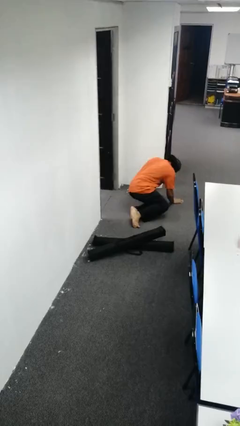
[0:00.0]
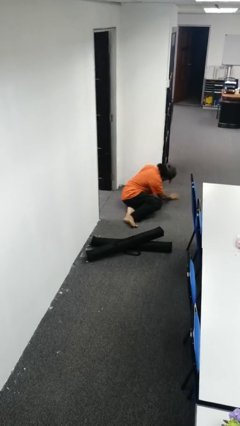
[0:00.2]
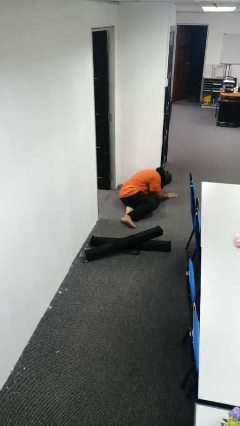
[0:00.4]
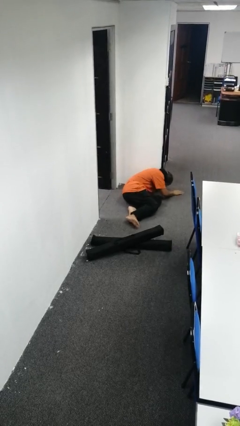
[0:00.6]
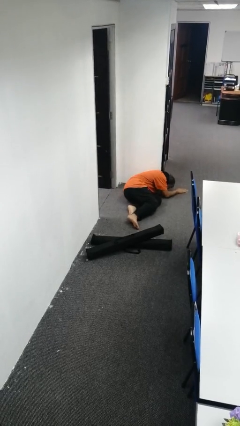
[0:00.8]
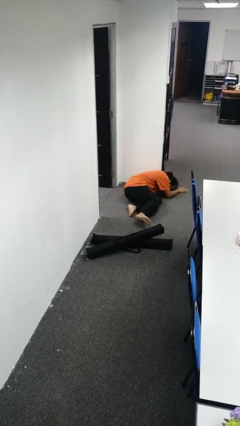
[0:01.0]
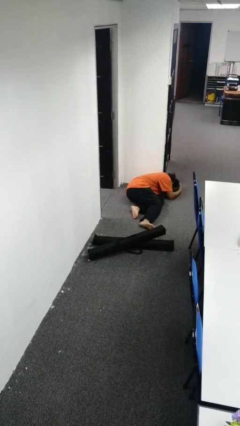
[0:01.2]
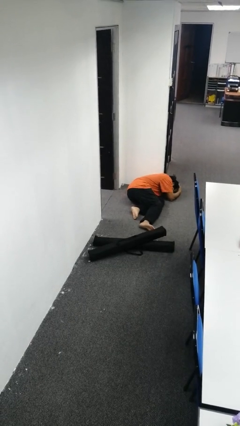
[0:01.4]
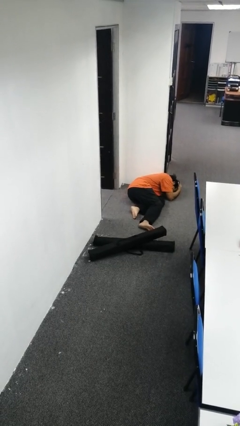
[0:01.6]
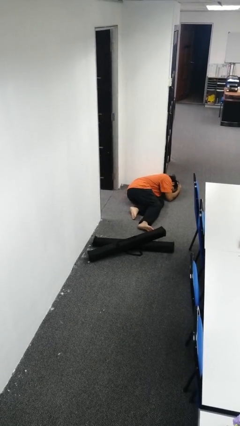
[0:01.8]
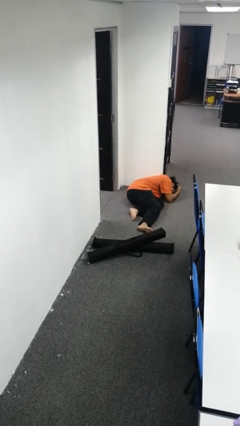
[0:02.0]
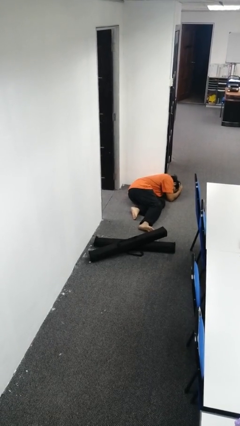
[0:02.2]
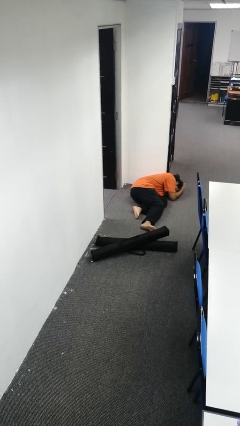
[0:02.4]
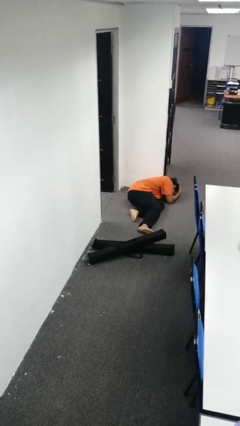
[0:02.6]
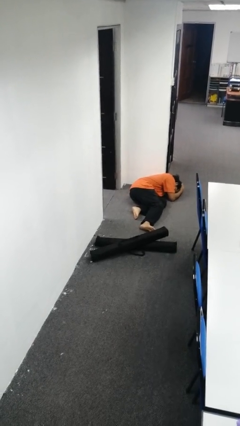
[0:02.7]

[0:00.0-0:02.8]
person lies down on floor

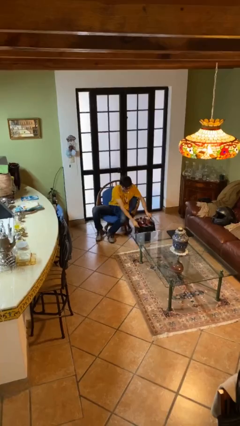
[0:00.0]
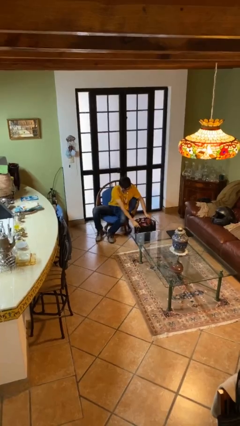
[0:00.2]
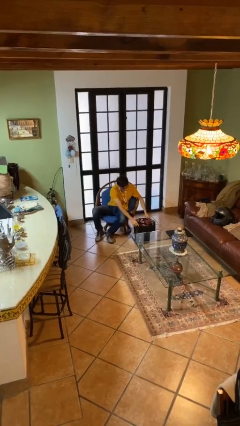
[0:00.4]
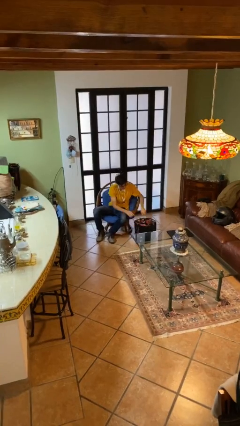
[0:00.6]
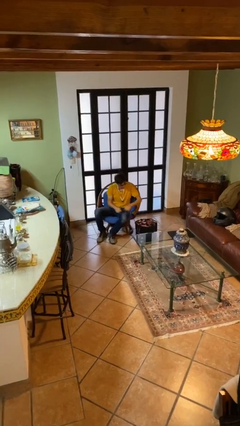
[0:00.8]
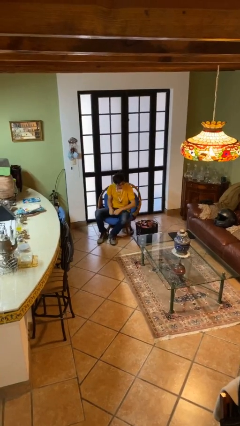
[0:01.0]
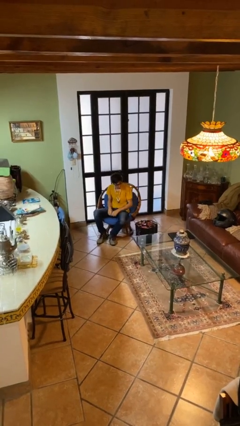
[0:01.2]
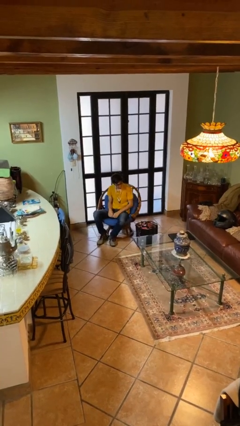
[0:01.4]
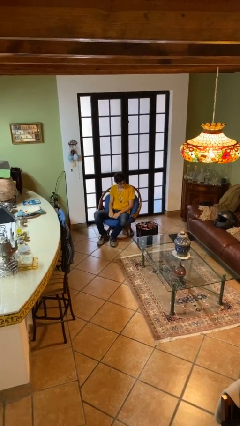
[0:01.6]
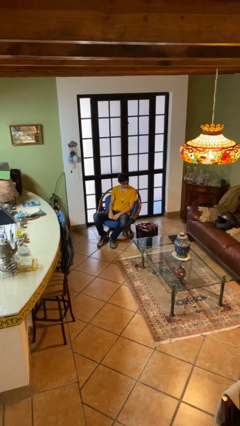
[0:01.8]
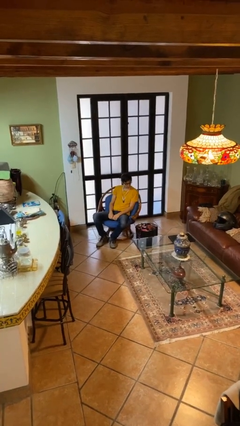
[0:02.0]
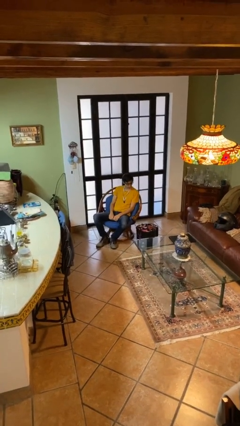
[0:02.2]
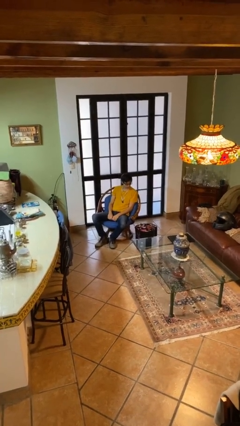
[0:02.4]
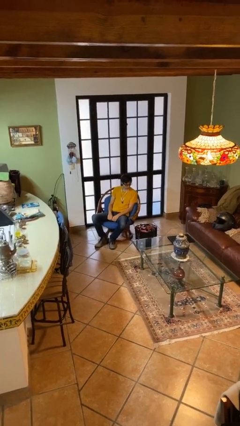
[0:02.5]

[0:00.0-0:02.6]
person puts down object on floor

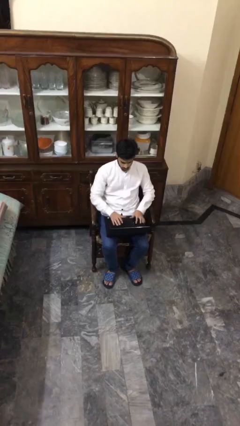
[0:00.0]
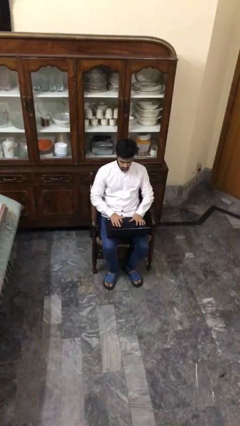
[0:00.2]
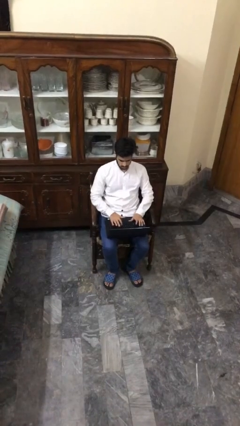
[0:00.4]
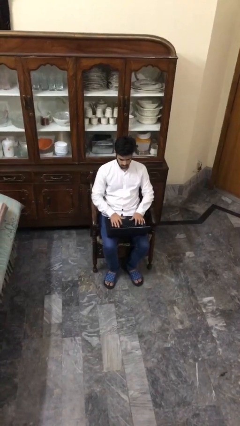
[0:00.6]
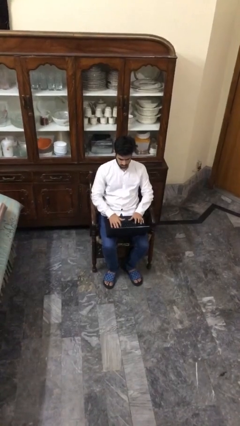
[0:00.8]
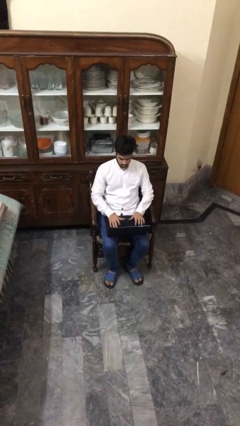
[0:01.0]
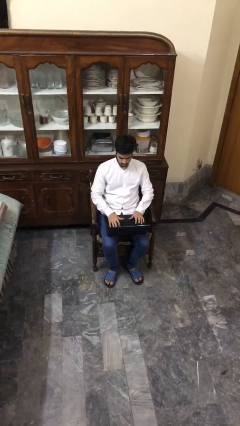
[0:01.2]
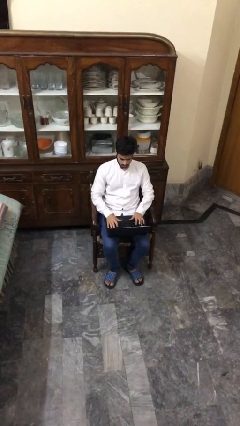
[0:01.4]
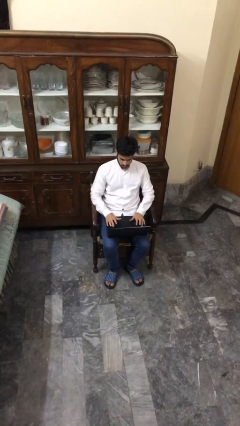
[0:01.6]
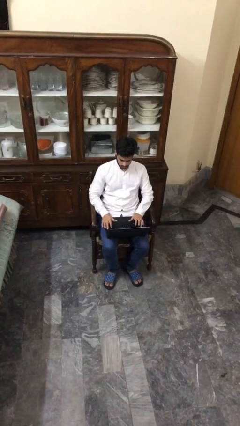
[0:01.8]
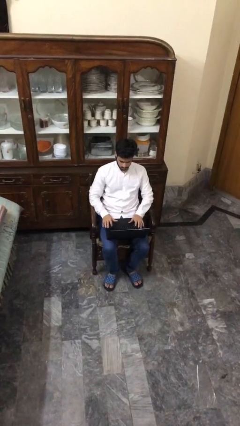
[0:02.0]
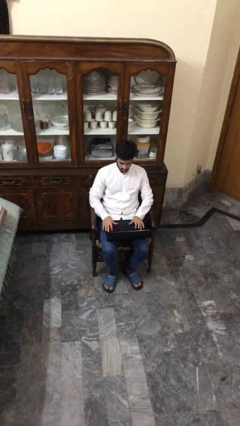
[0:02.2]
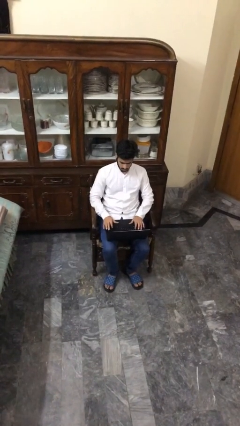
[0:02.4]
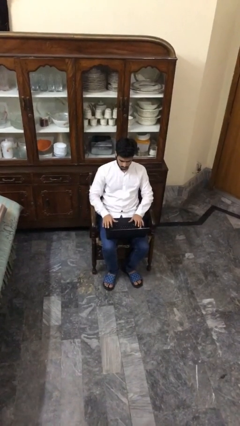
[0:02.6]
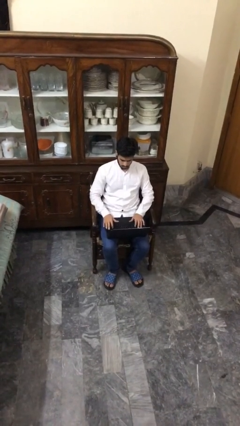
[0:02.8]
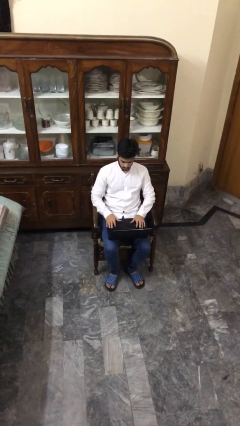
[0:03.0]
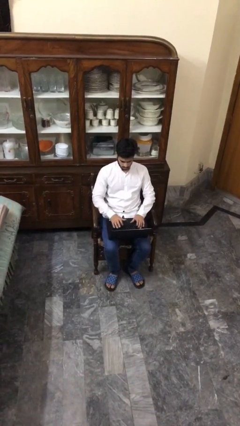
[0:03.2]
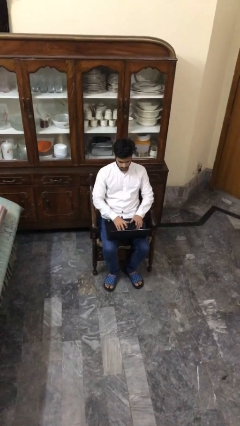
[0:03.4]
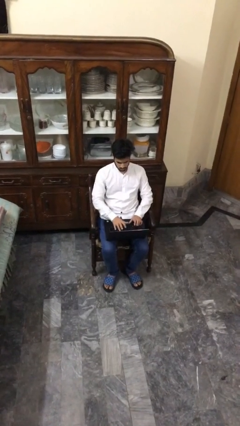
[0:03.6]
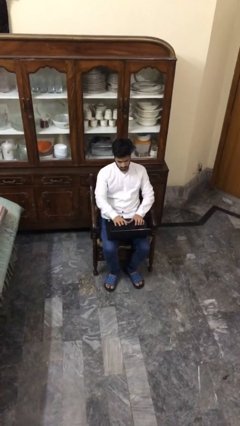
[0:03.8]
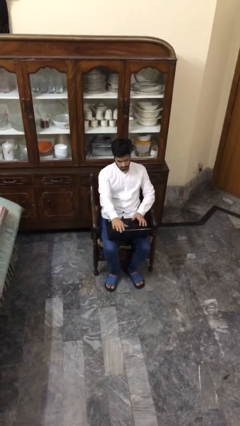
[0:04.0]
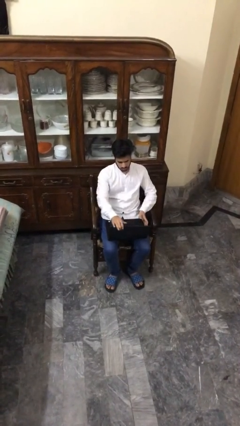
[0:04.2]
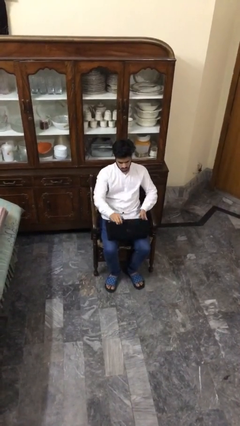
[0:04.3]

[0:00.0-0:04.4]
person interacts with laptop

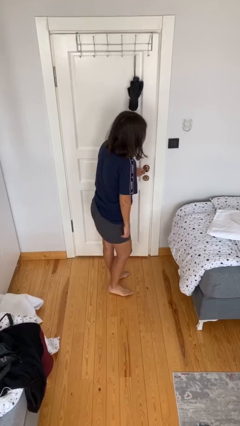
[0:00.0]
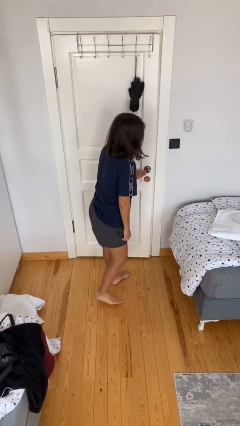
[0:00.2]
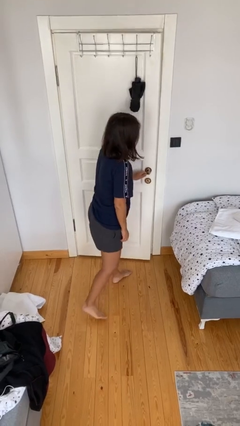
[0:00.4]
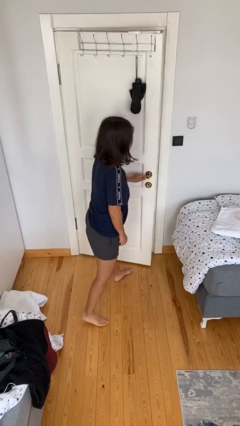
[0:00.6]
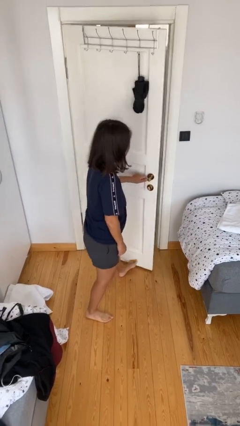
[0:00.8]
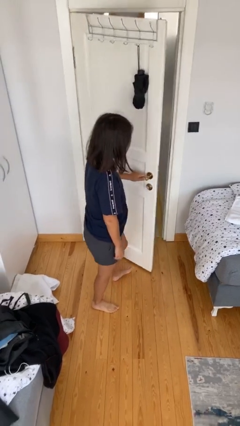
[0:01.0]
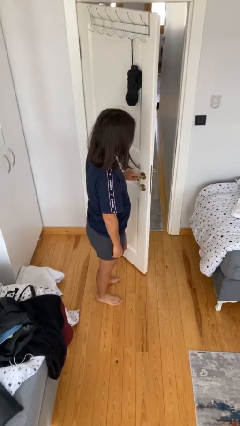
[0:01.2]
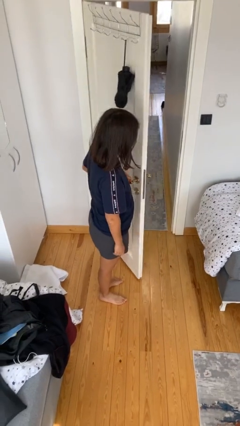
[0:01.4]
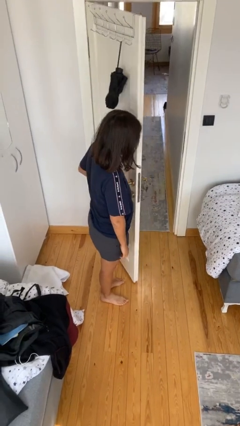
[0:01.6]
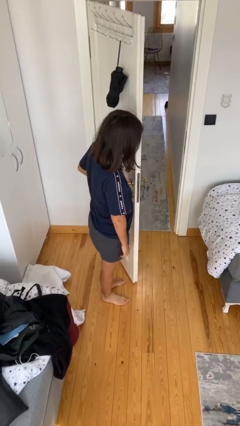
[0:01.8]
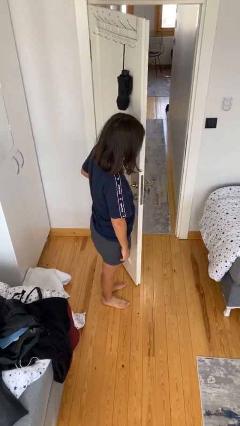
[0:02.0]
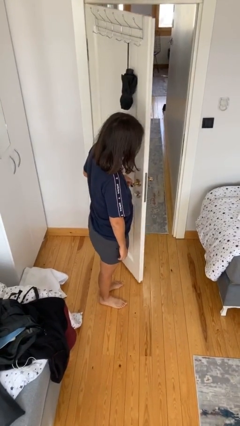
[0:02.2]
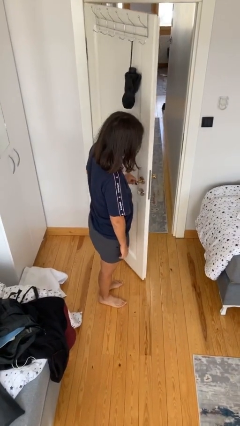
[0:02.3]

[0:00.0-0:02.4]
person opens facility door

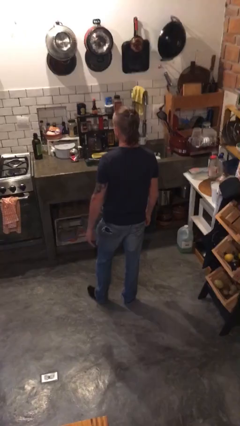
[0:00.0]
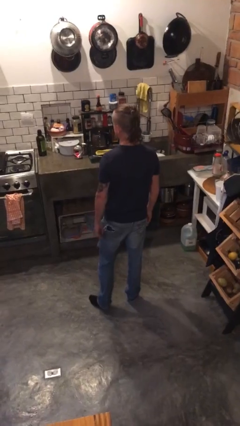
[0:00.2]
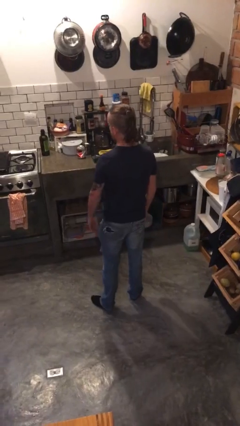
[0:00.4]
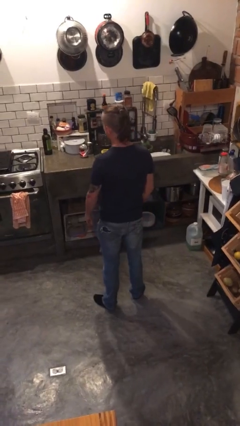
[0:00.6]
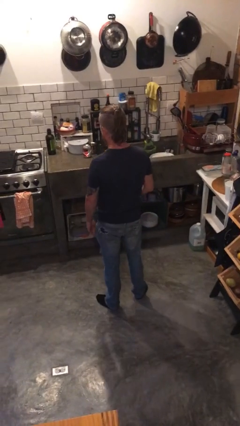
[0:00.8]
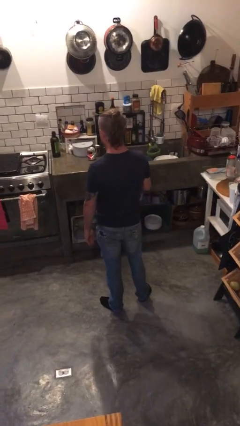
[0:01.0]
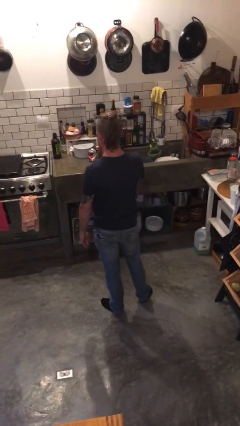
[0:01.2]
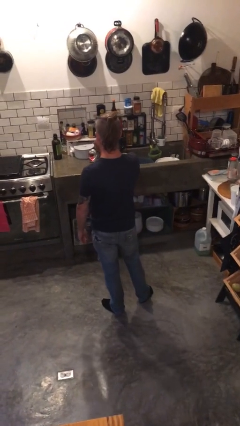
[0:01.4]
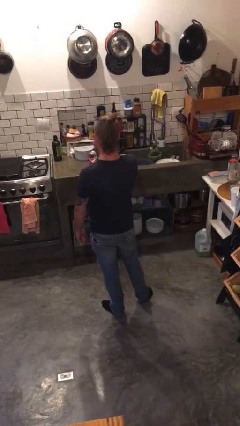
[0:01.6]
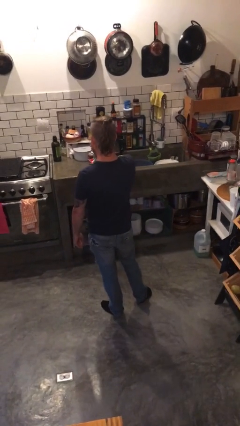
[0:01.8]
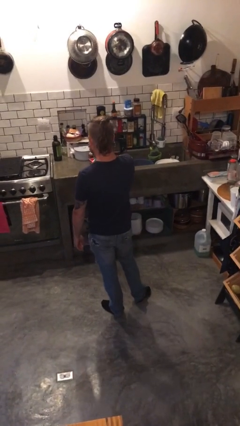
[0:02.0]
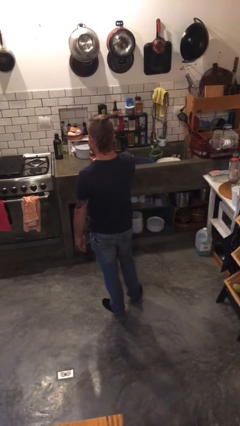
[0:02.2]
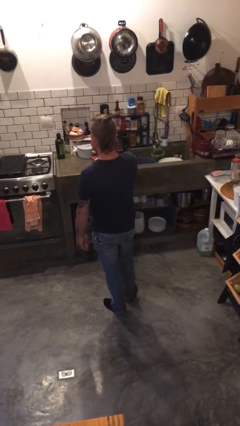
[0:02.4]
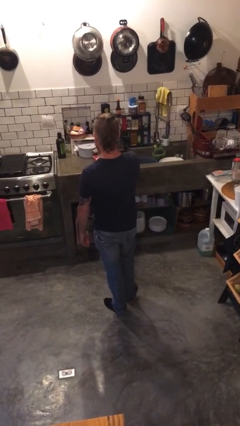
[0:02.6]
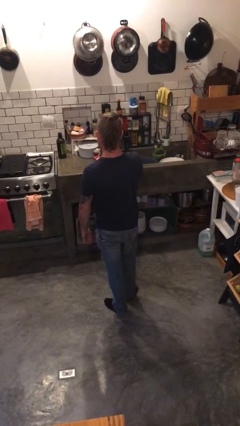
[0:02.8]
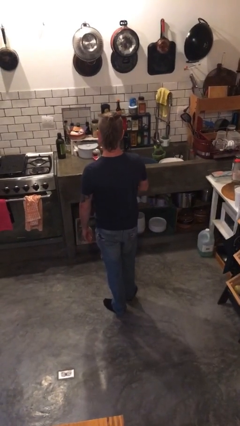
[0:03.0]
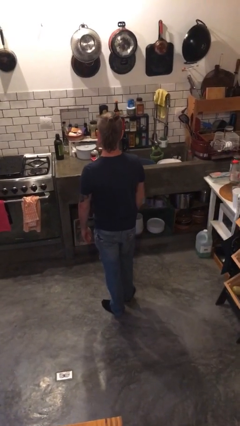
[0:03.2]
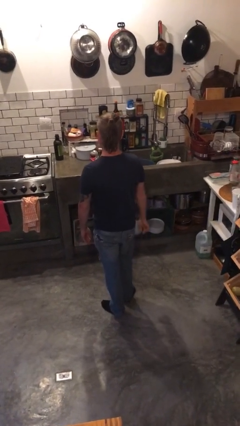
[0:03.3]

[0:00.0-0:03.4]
person yawns

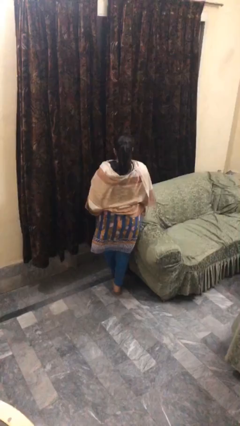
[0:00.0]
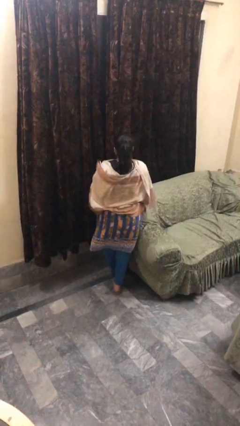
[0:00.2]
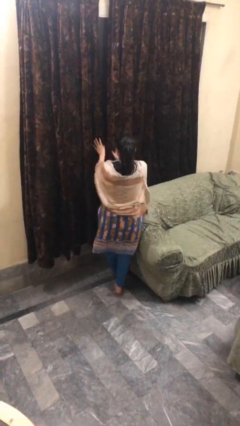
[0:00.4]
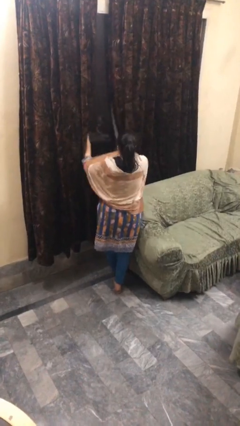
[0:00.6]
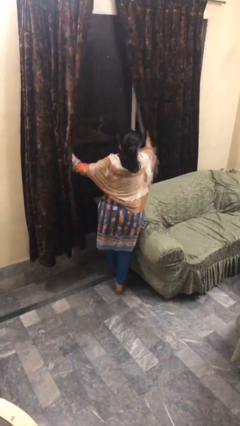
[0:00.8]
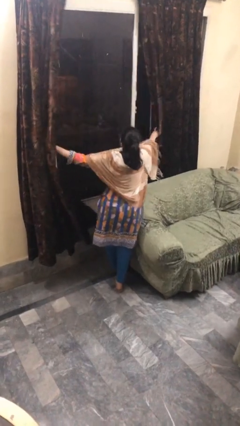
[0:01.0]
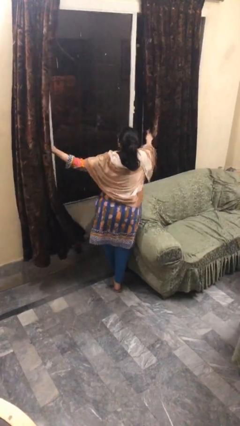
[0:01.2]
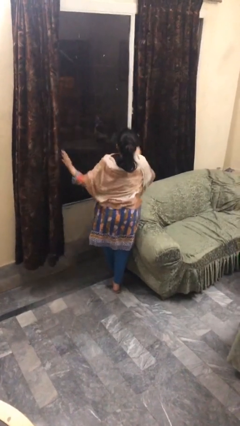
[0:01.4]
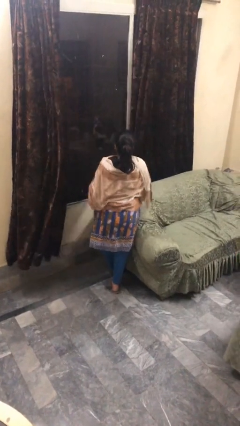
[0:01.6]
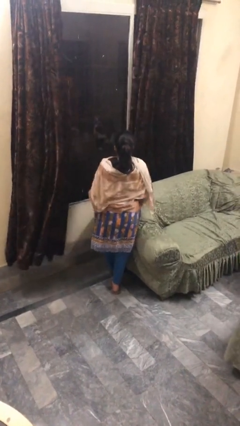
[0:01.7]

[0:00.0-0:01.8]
person opens curtains
